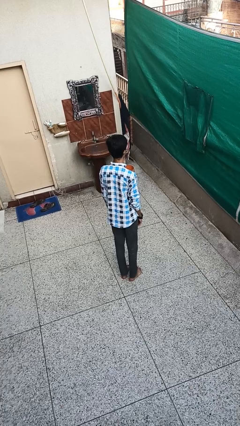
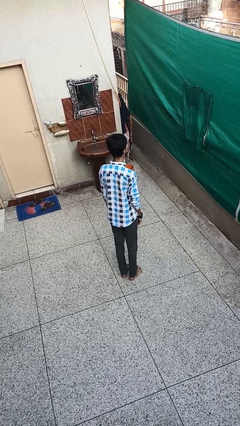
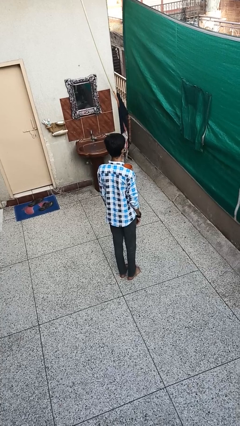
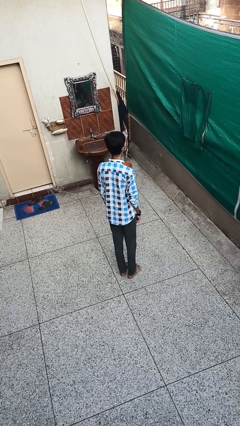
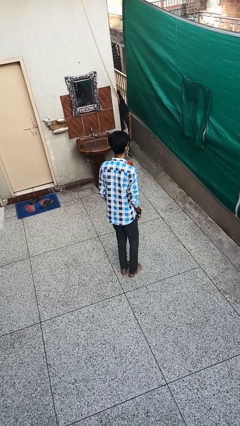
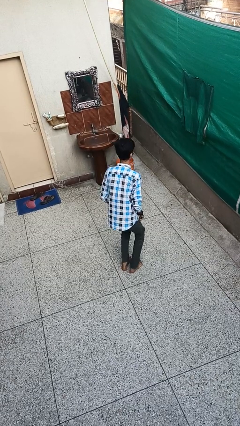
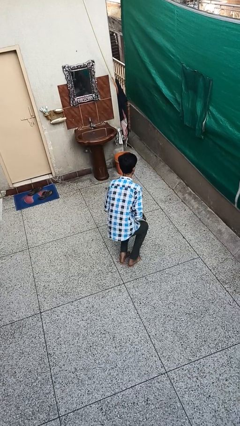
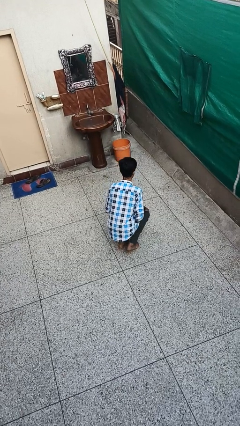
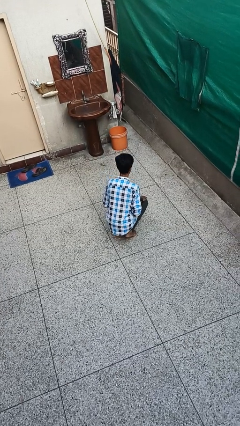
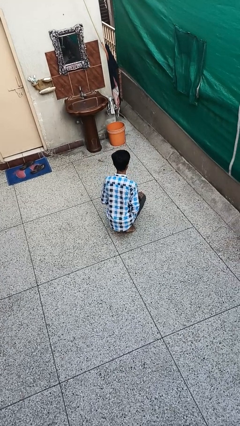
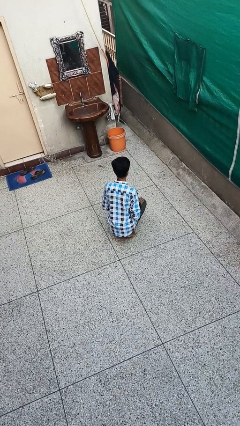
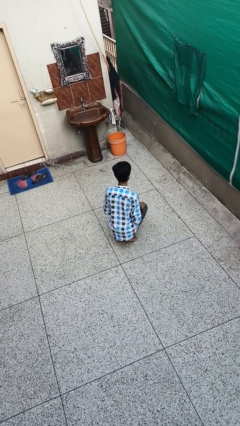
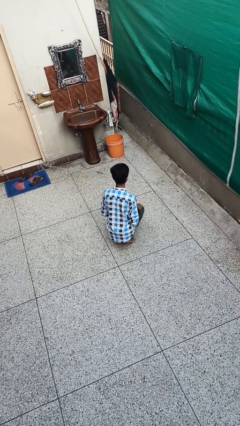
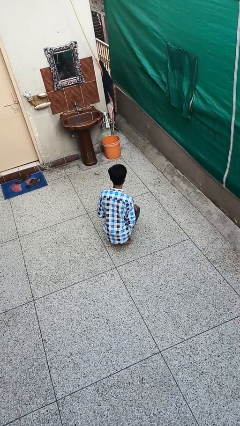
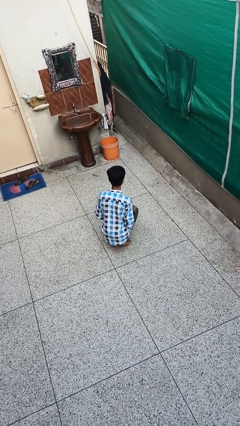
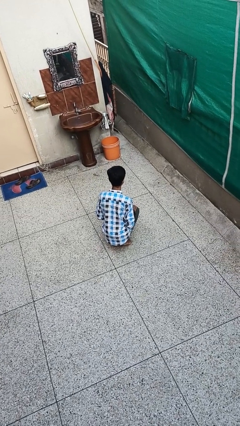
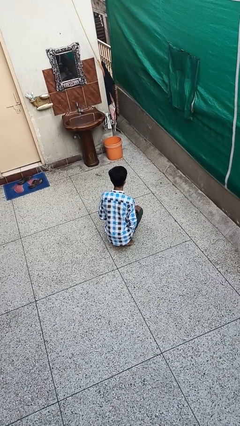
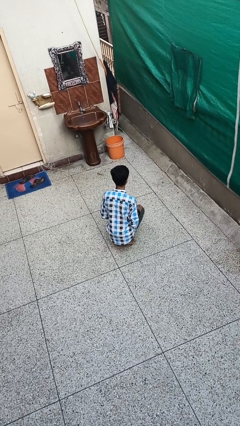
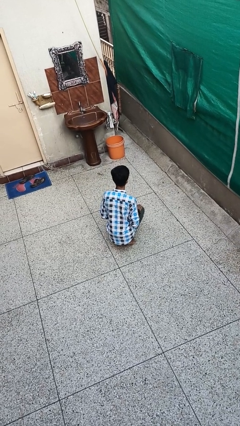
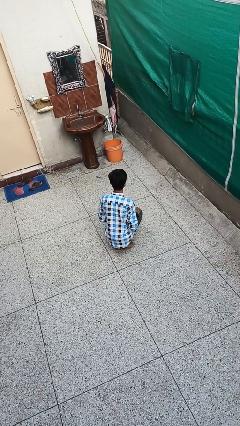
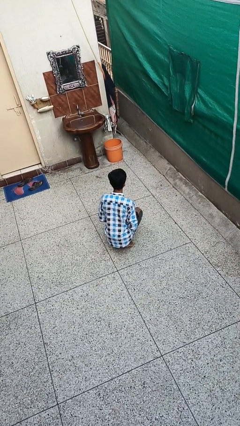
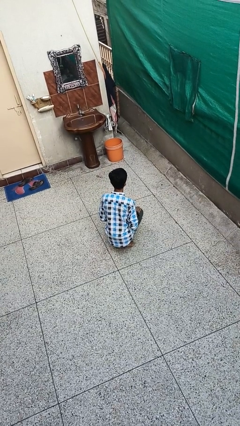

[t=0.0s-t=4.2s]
person squats

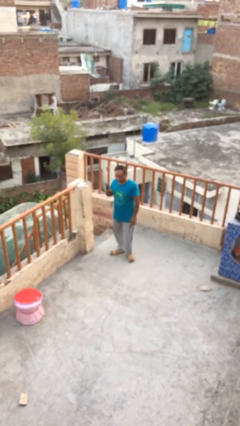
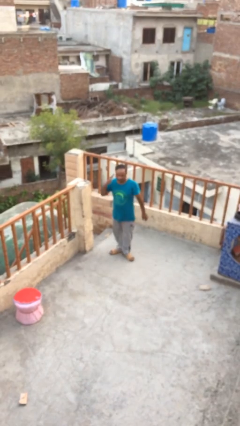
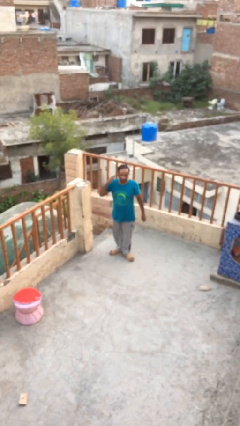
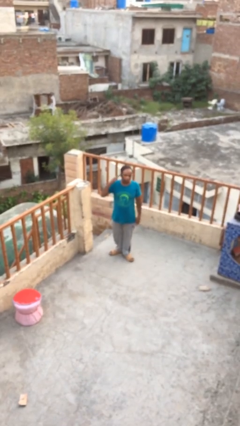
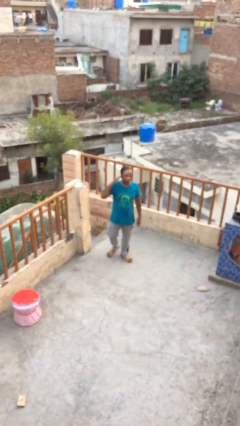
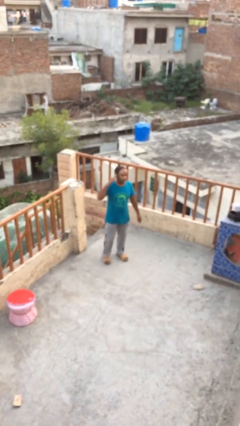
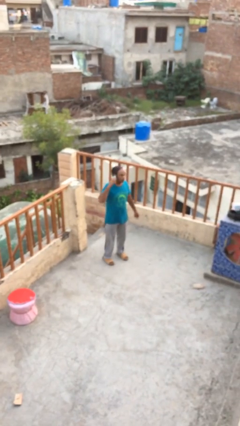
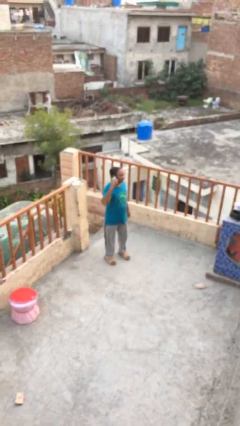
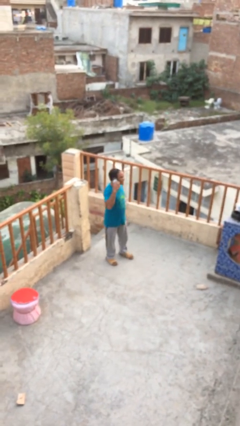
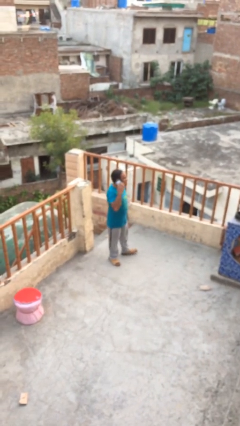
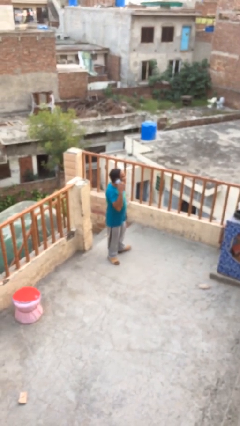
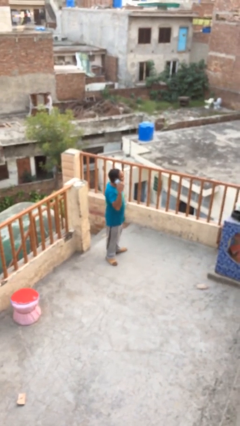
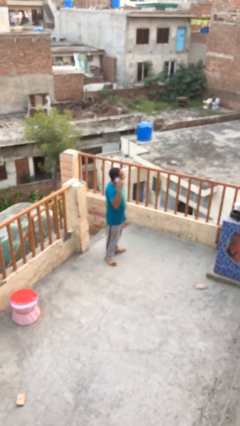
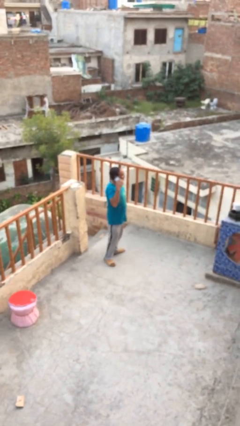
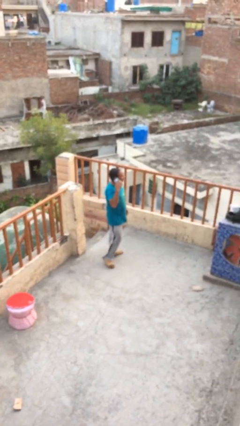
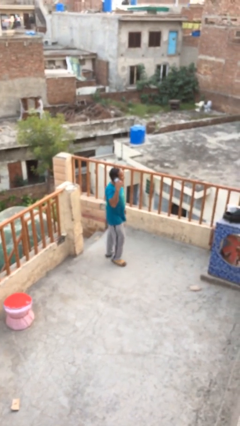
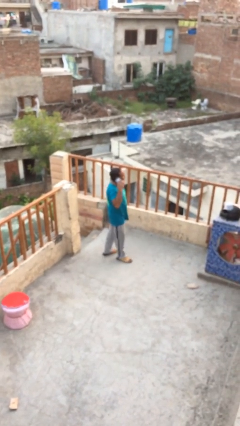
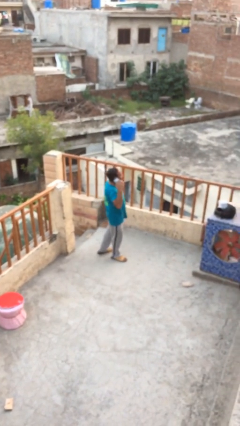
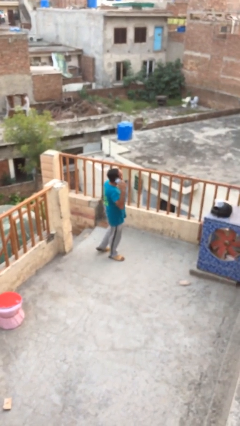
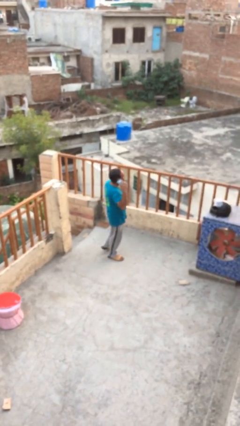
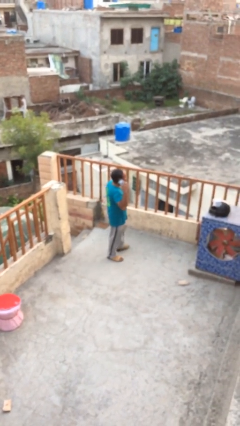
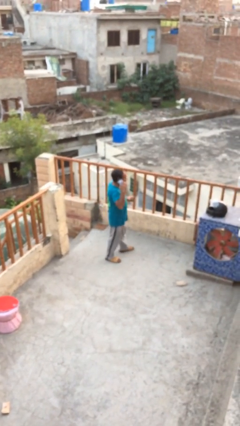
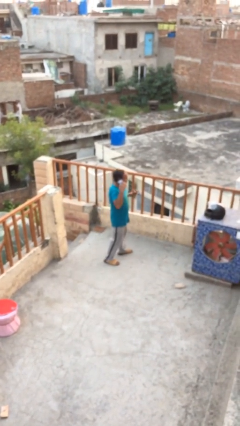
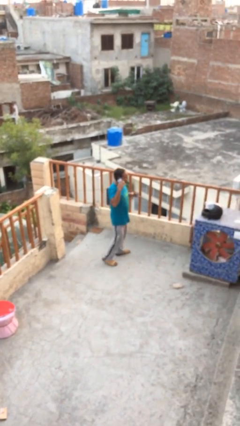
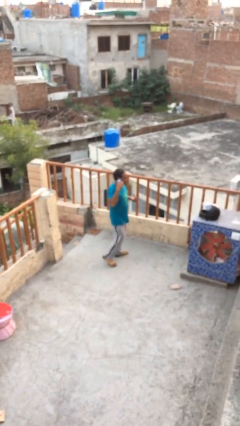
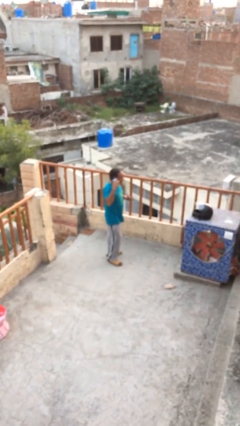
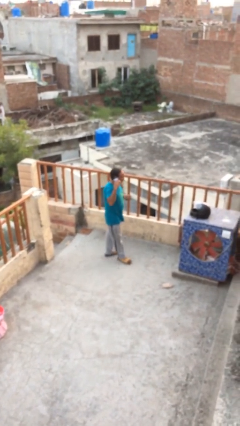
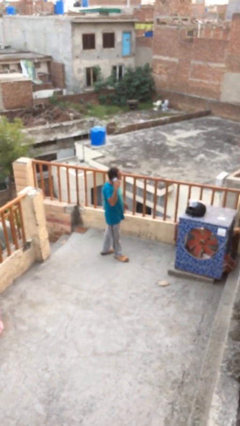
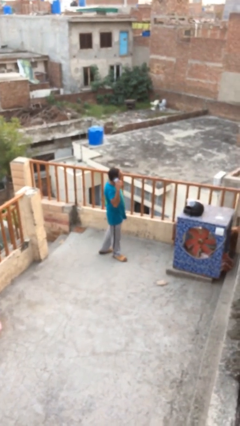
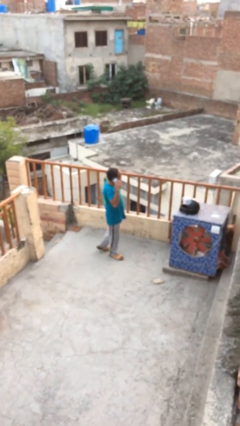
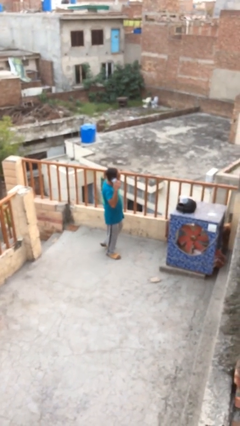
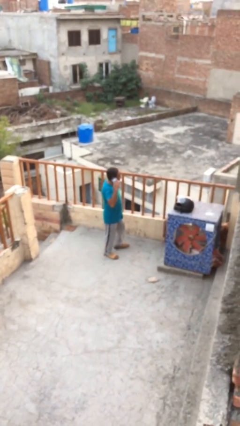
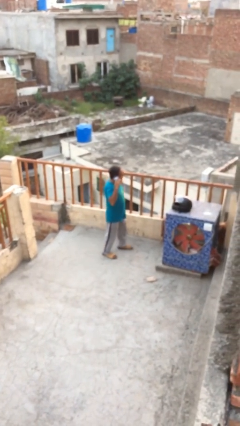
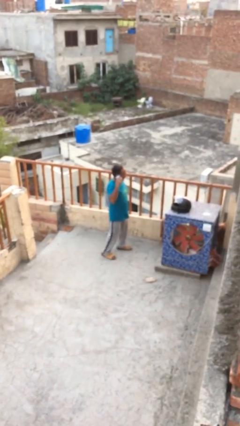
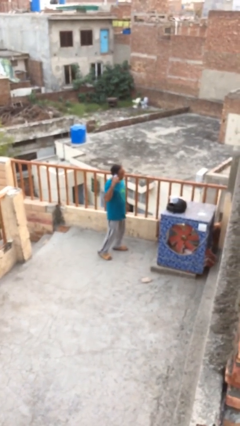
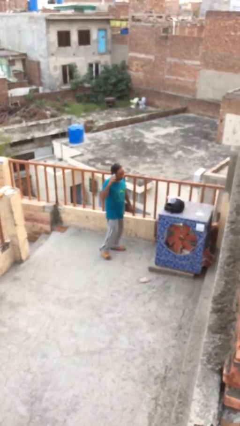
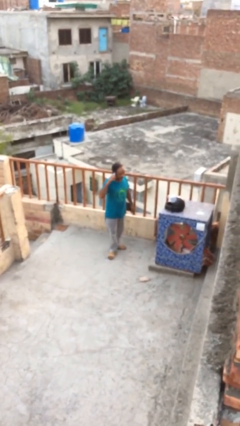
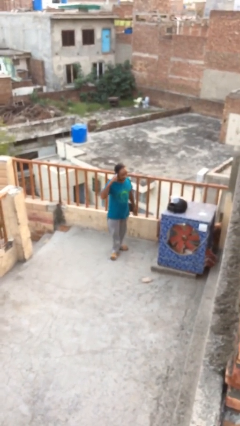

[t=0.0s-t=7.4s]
person talks on phone

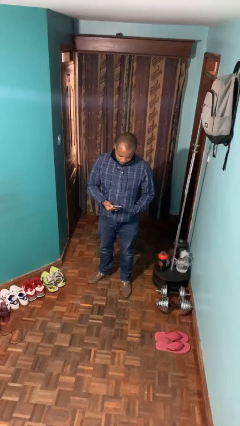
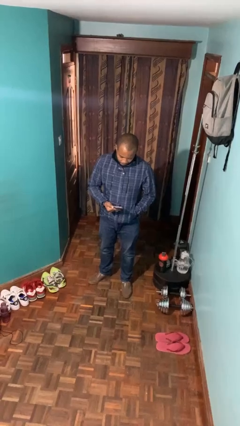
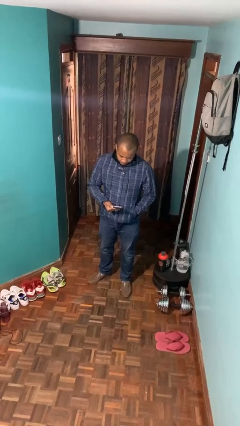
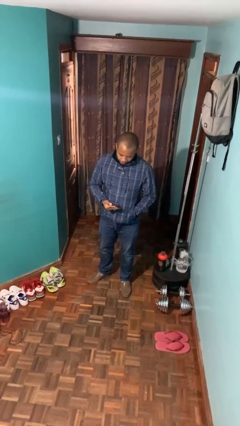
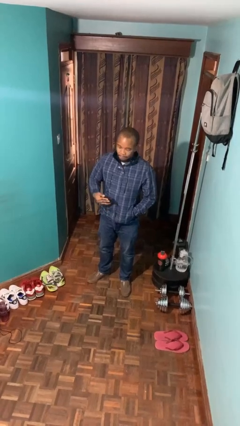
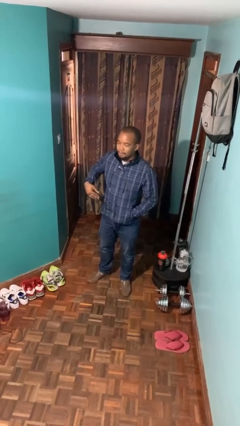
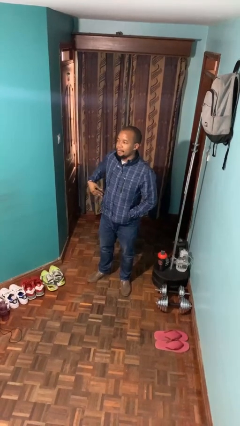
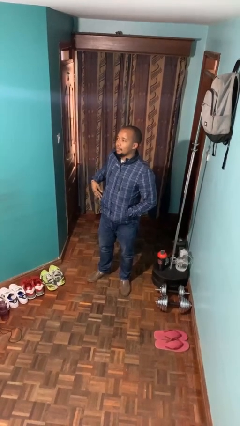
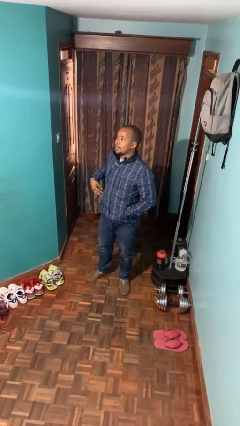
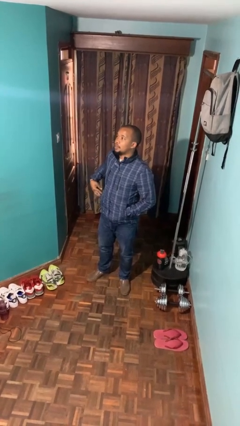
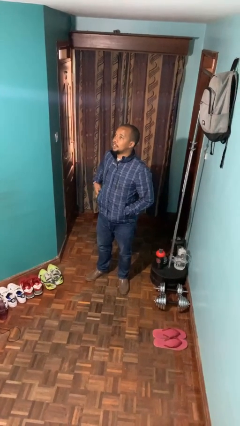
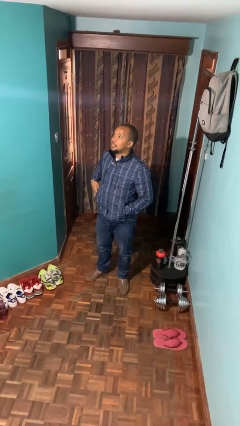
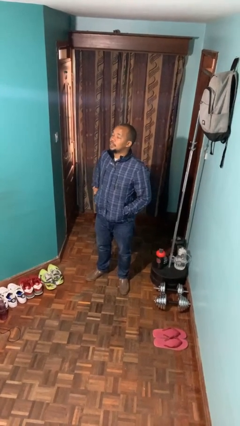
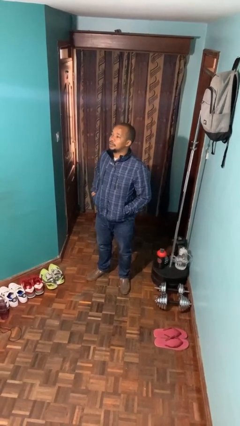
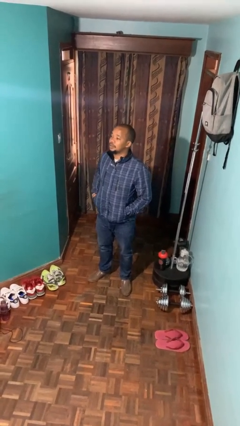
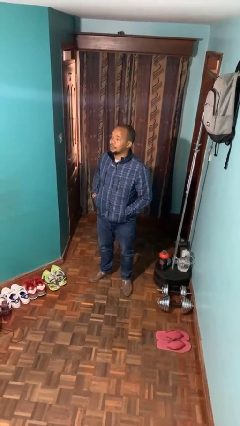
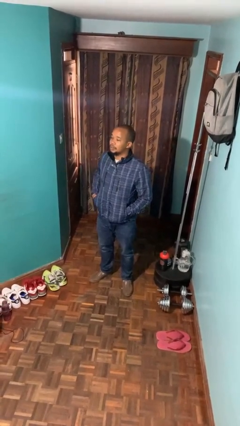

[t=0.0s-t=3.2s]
person puts phone into pocket

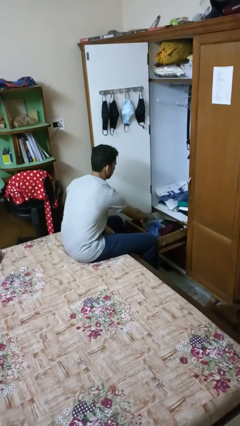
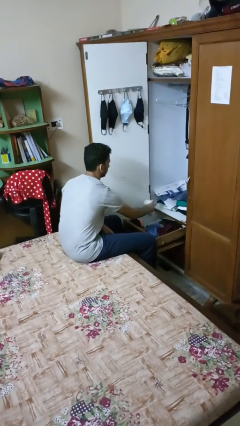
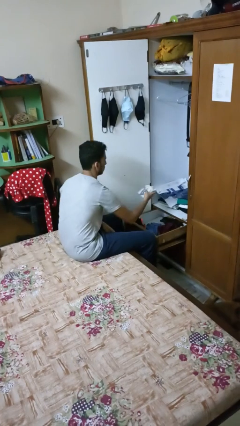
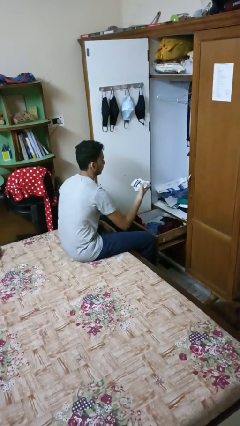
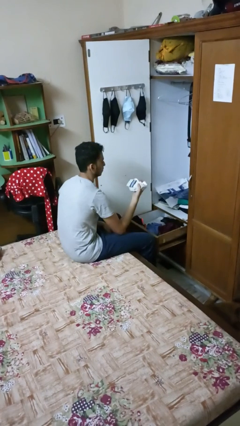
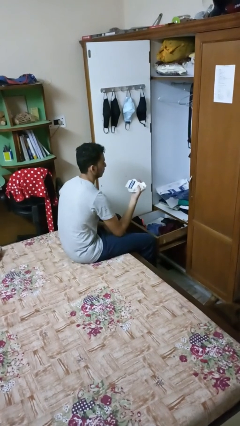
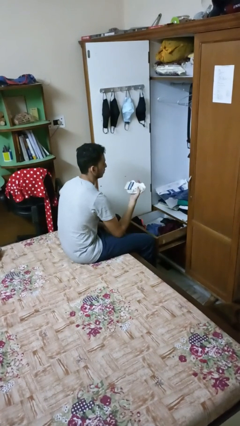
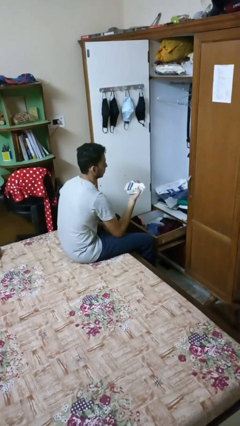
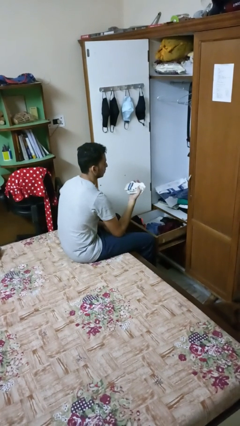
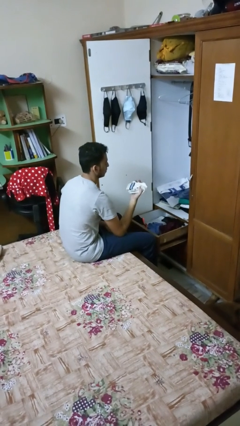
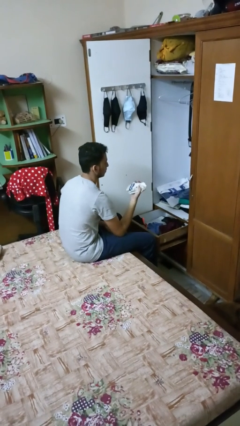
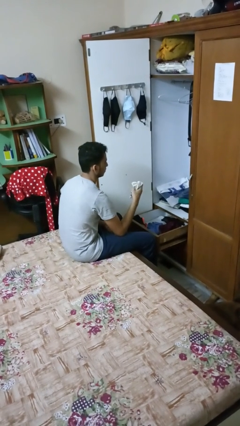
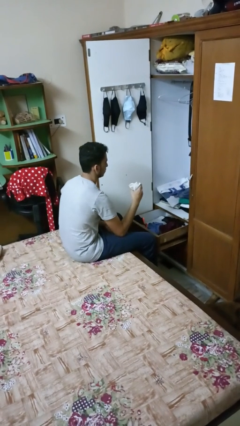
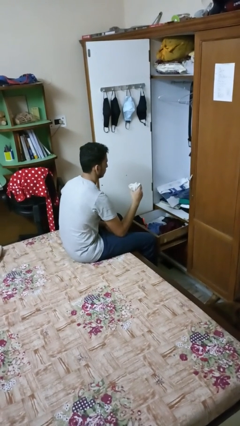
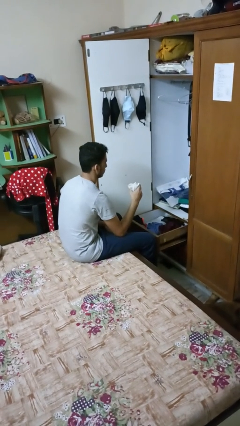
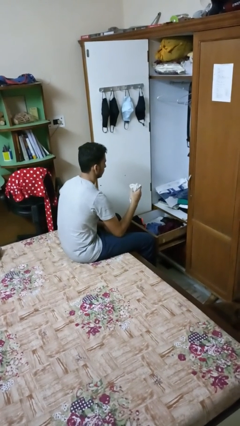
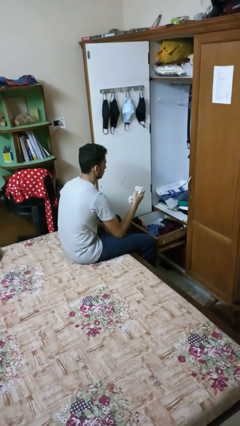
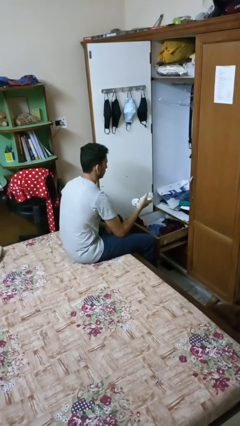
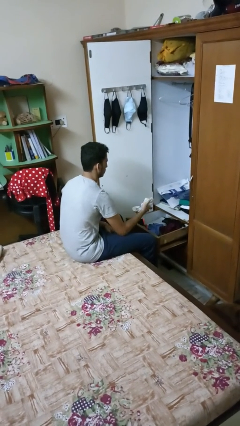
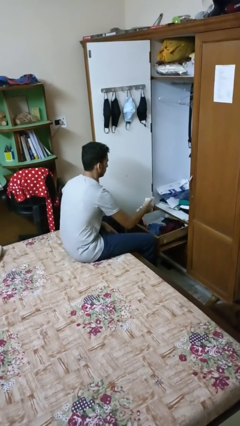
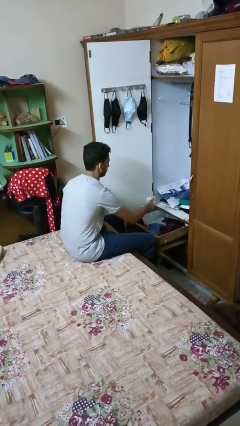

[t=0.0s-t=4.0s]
person takes clothes from dresser
